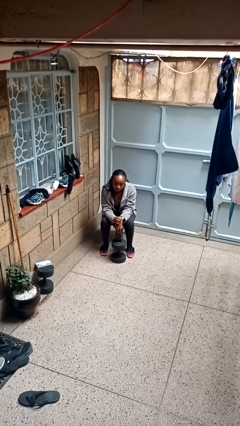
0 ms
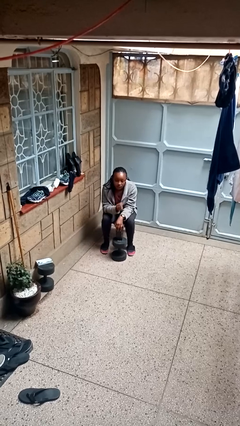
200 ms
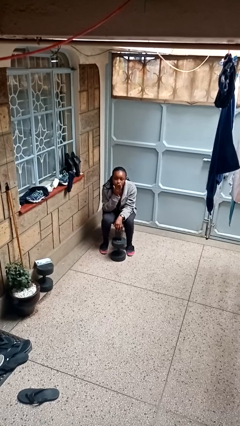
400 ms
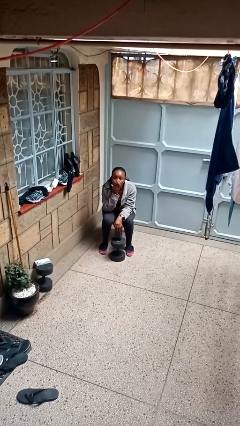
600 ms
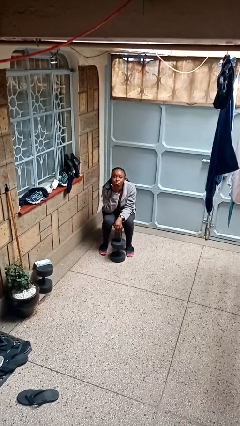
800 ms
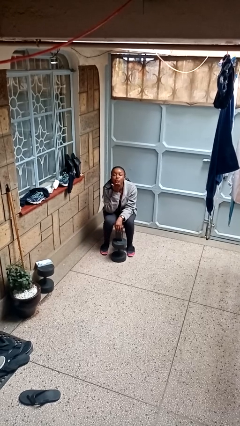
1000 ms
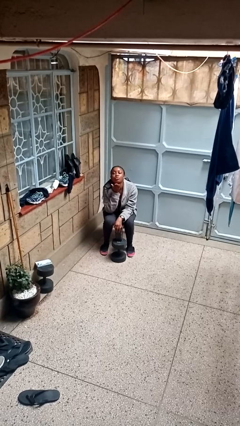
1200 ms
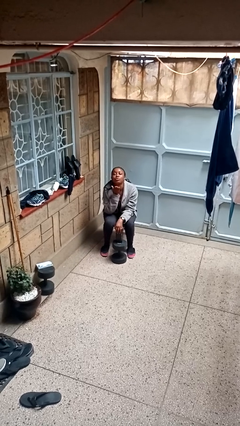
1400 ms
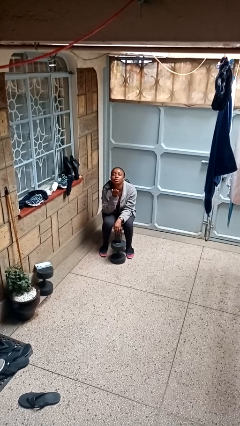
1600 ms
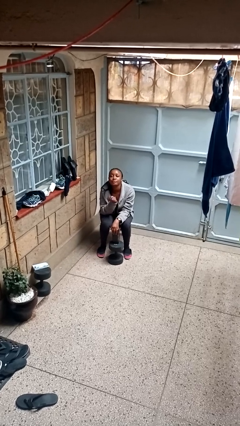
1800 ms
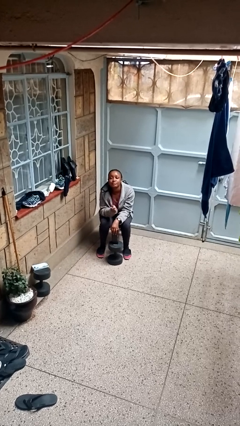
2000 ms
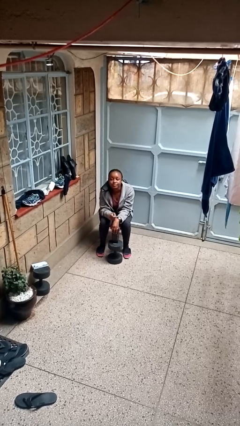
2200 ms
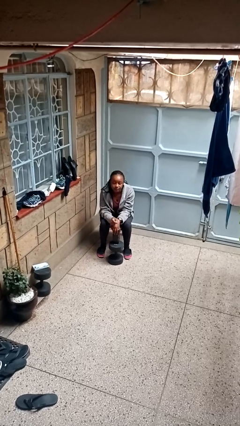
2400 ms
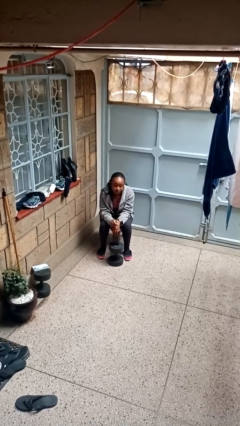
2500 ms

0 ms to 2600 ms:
person gestures blow kiss

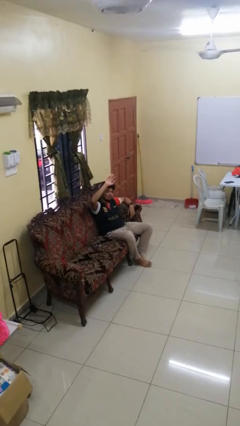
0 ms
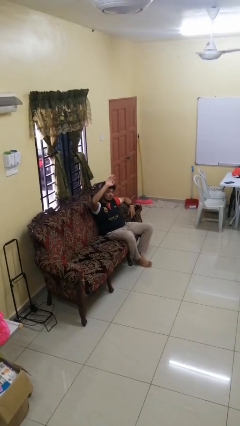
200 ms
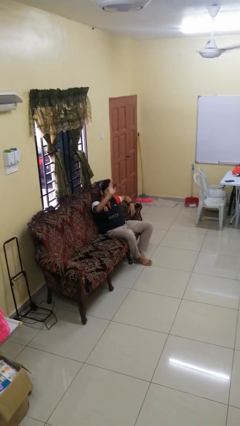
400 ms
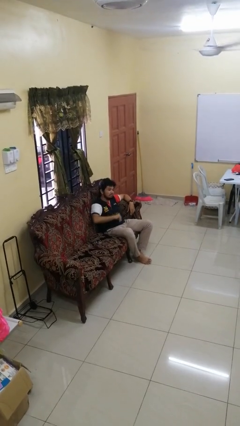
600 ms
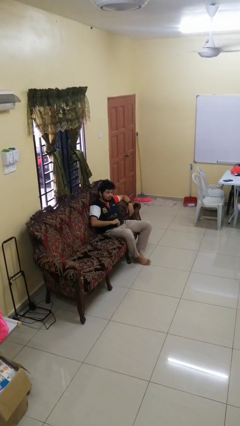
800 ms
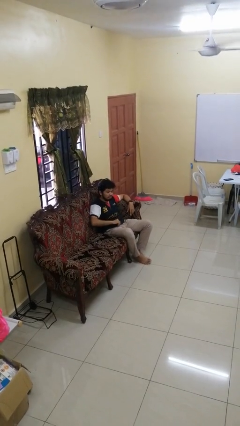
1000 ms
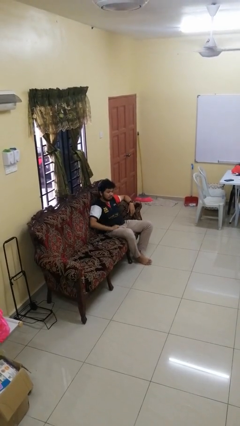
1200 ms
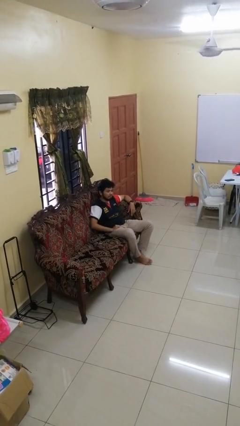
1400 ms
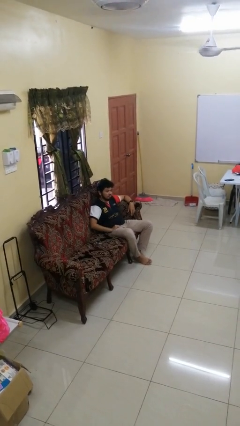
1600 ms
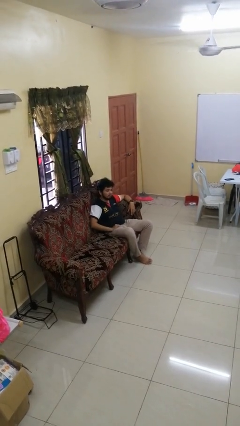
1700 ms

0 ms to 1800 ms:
person gestures swipe down

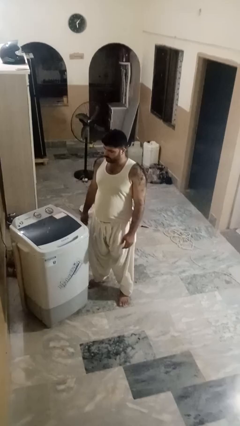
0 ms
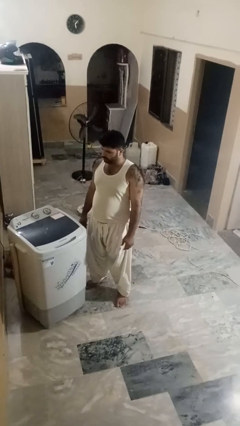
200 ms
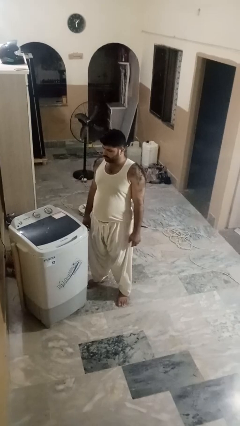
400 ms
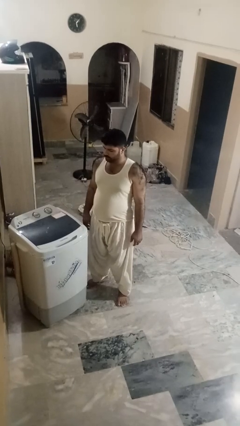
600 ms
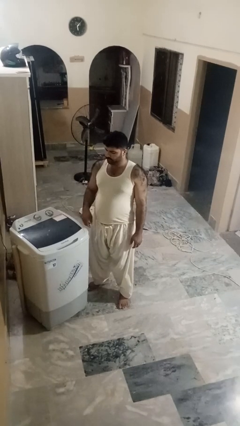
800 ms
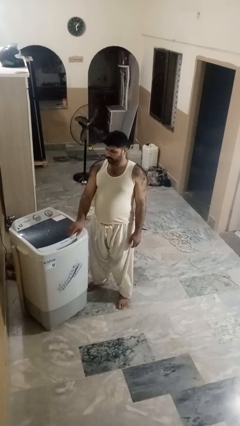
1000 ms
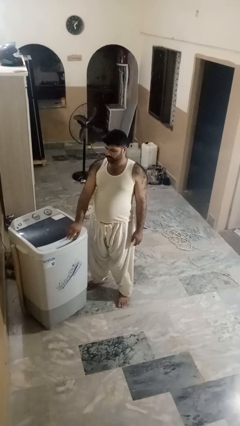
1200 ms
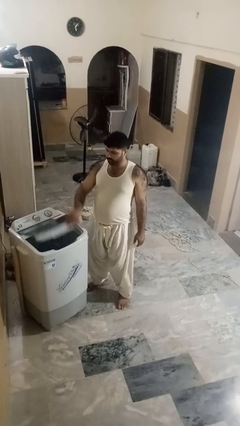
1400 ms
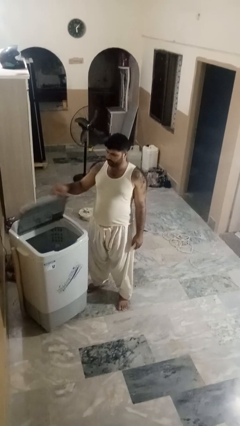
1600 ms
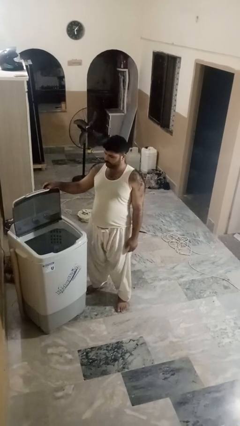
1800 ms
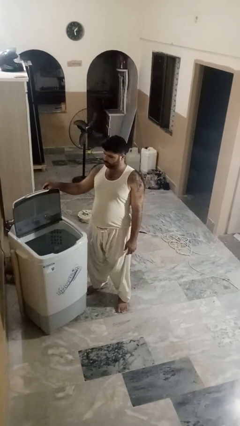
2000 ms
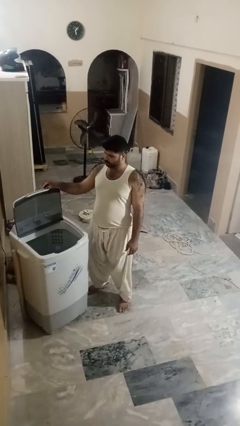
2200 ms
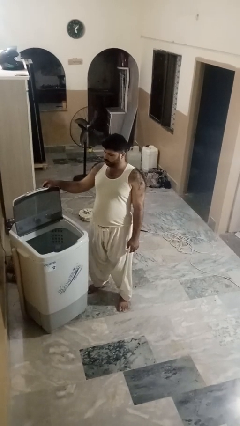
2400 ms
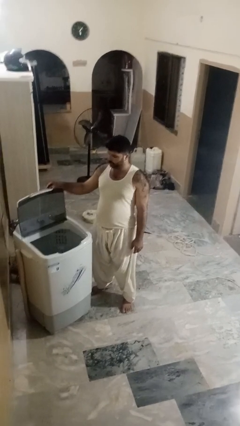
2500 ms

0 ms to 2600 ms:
person opens clothes washer

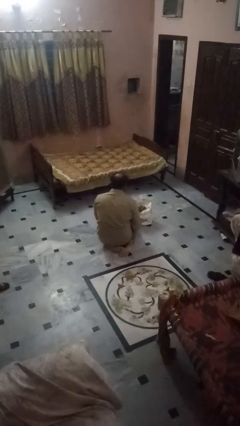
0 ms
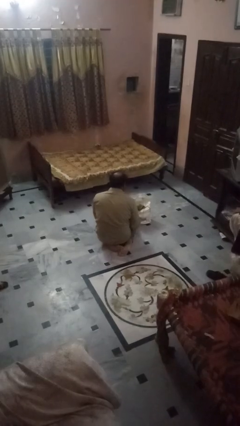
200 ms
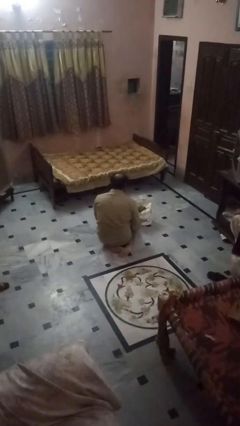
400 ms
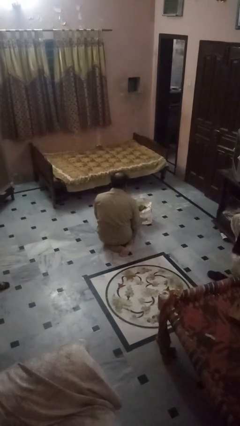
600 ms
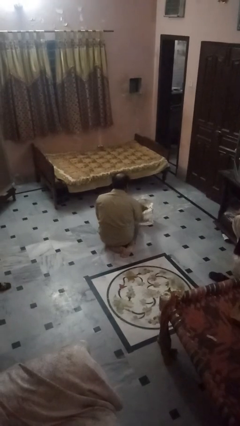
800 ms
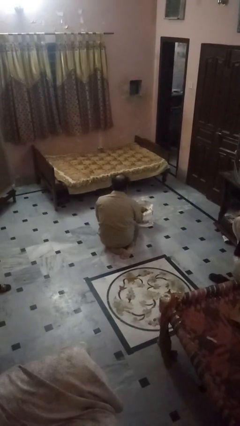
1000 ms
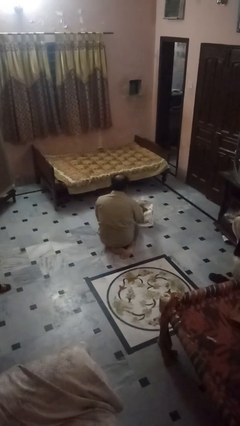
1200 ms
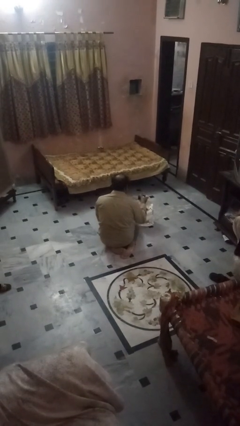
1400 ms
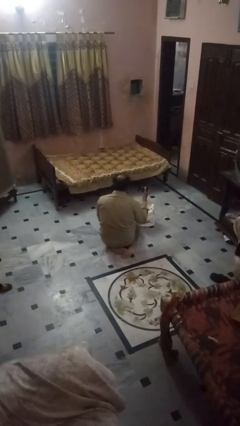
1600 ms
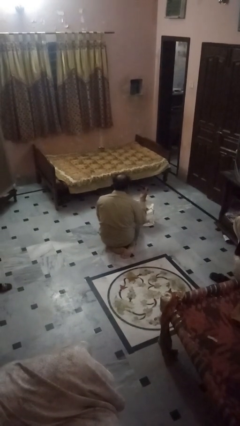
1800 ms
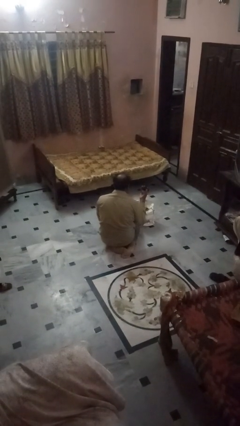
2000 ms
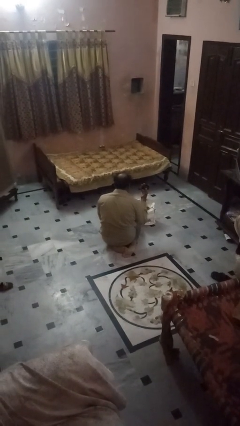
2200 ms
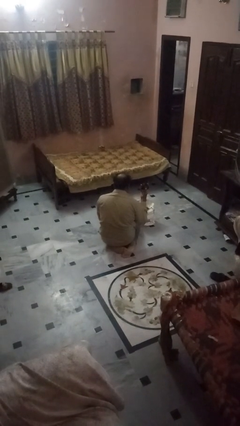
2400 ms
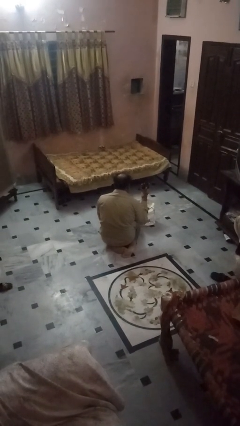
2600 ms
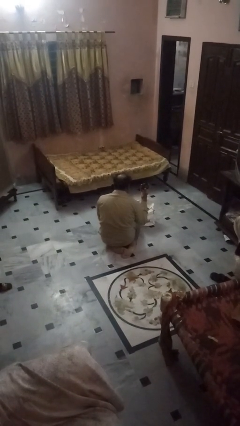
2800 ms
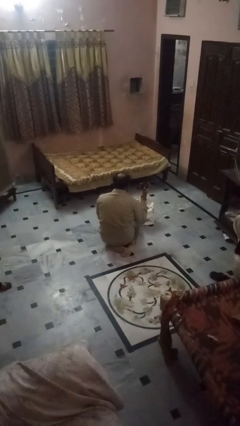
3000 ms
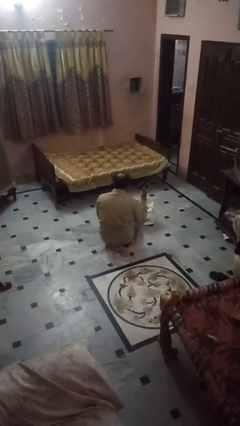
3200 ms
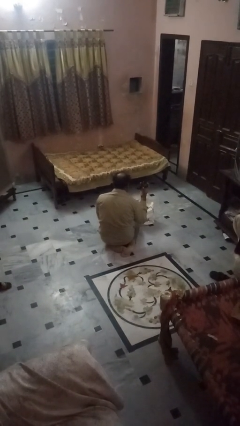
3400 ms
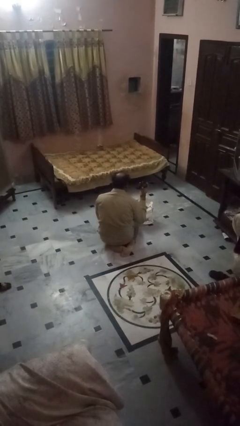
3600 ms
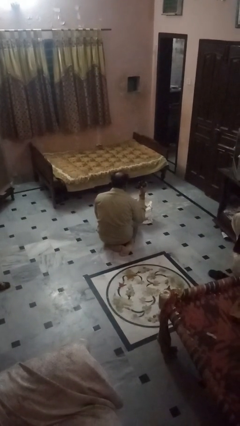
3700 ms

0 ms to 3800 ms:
person takes object from bag

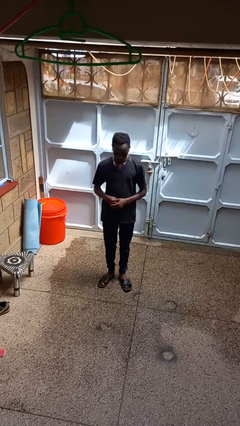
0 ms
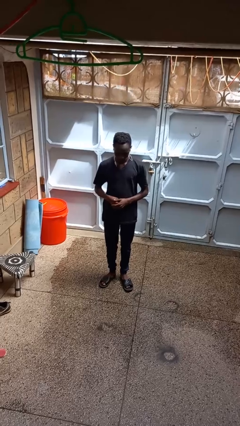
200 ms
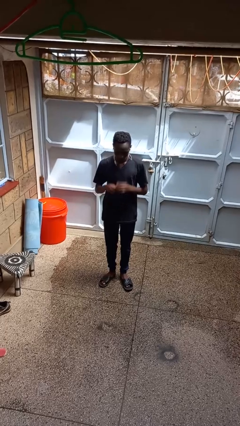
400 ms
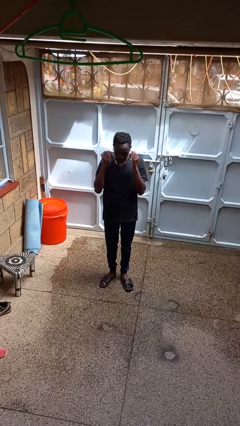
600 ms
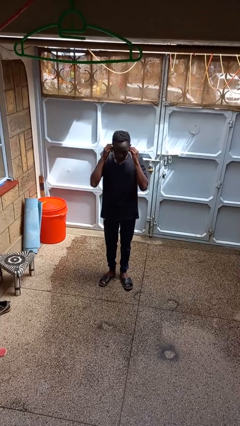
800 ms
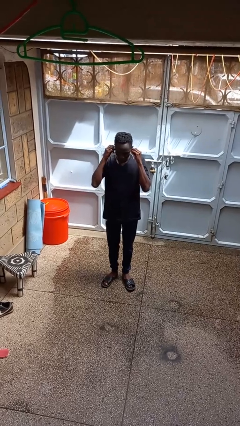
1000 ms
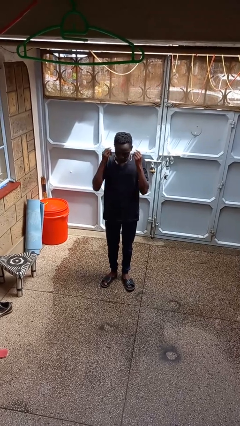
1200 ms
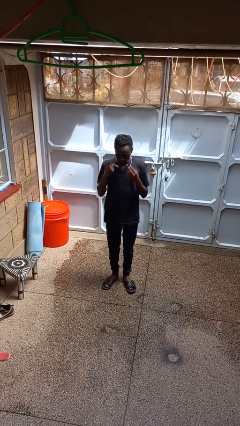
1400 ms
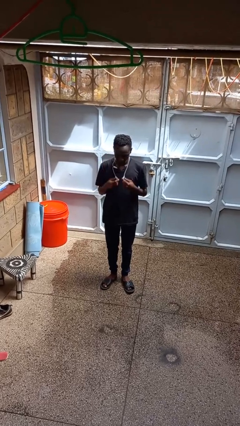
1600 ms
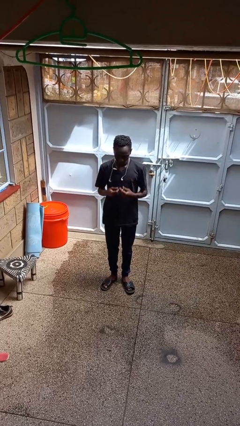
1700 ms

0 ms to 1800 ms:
person takes off headphones

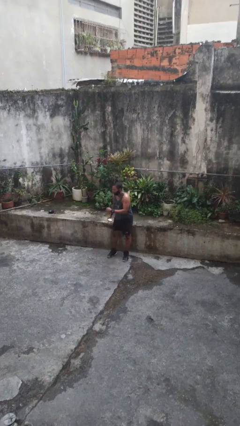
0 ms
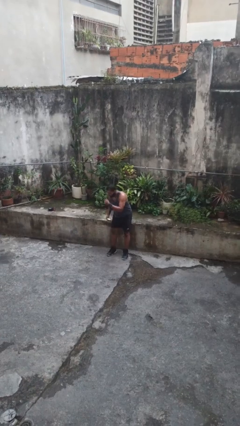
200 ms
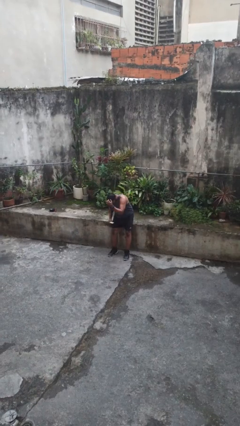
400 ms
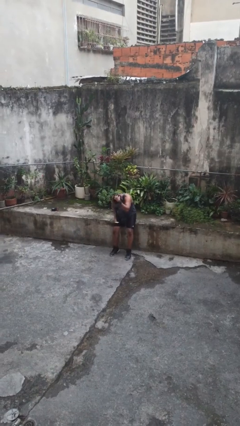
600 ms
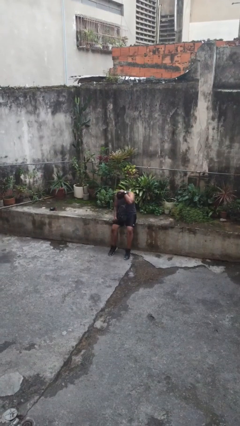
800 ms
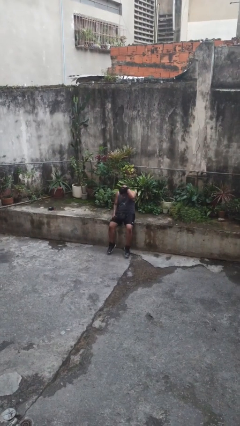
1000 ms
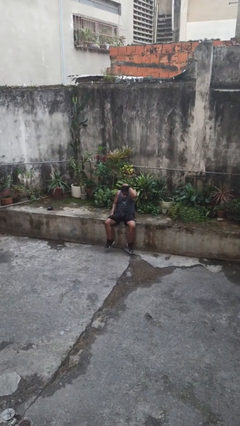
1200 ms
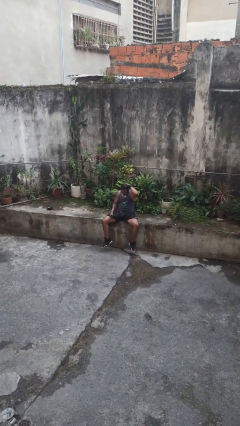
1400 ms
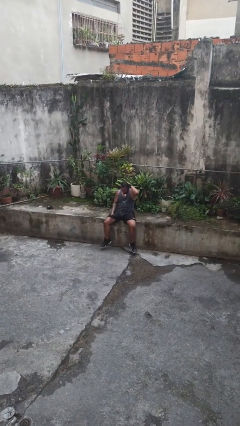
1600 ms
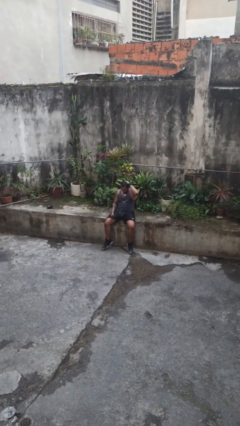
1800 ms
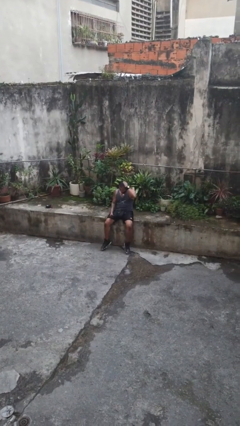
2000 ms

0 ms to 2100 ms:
person sits down

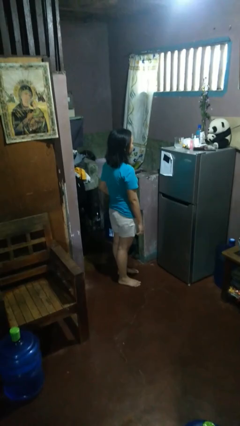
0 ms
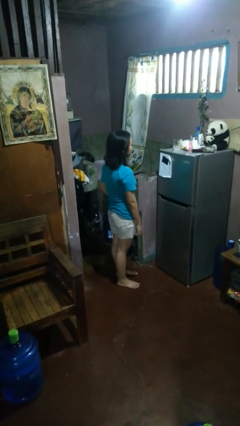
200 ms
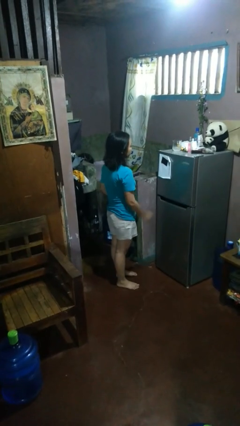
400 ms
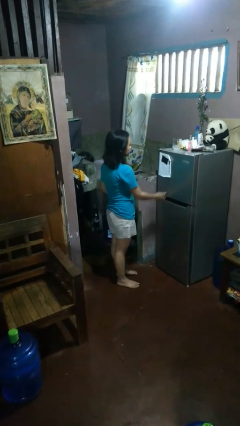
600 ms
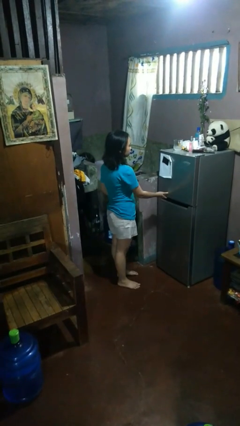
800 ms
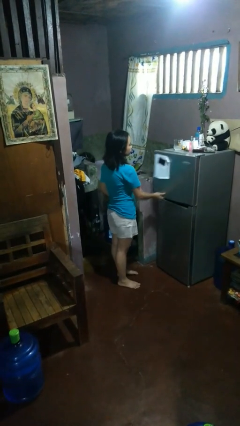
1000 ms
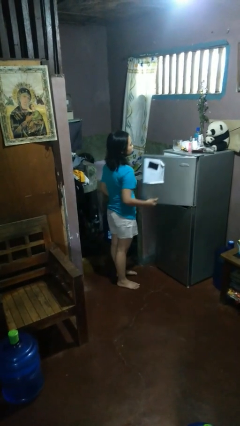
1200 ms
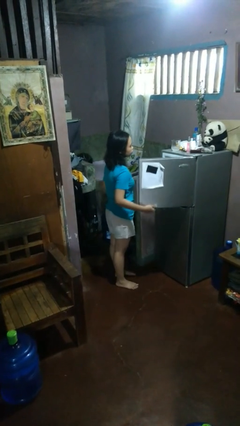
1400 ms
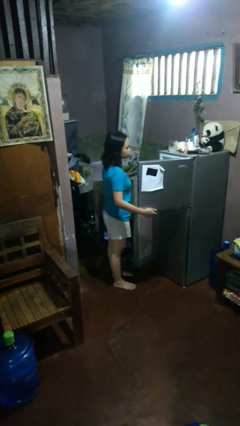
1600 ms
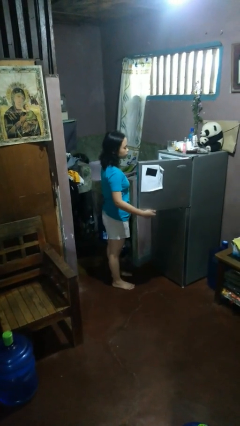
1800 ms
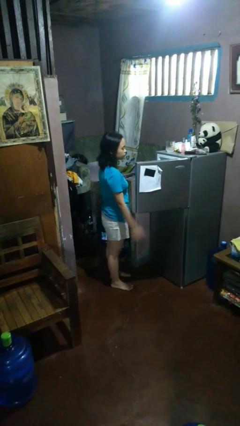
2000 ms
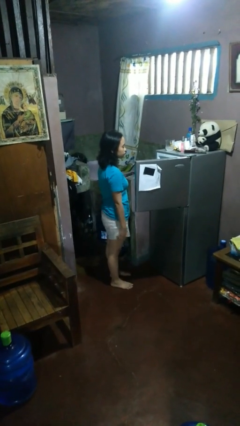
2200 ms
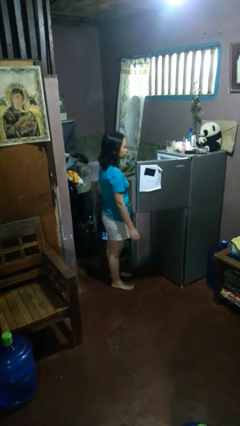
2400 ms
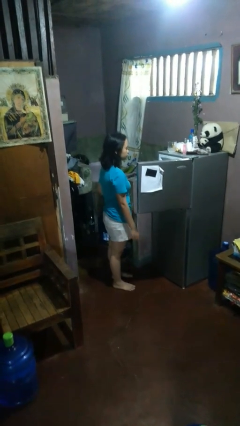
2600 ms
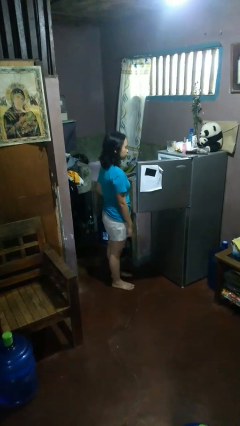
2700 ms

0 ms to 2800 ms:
person opens refrigerator

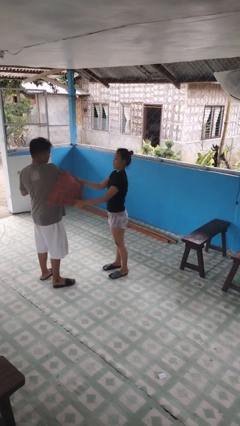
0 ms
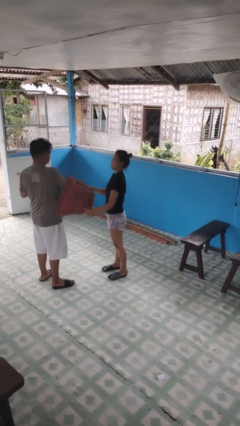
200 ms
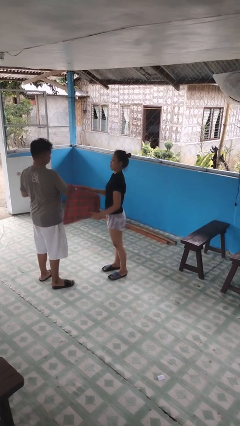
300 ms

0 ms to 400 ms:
person hits person with pillow
